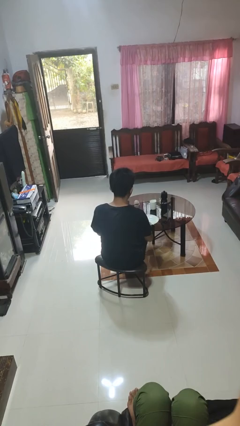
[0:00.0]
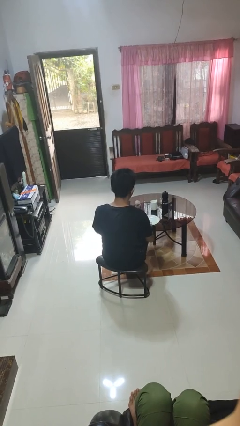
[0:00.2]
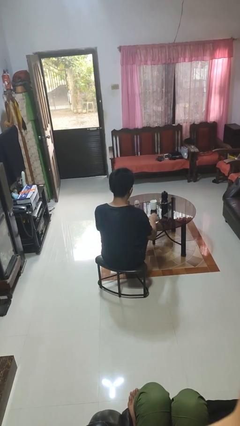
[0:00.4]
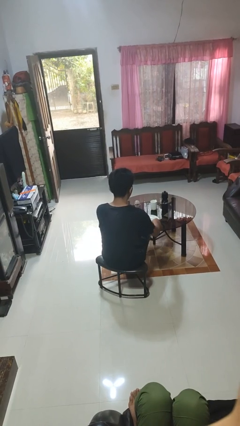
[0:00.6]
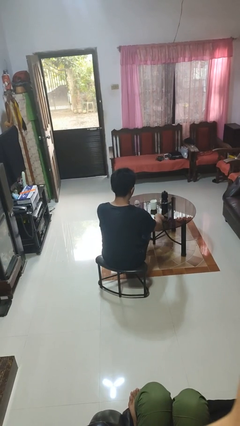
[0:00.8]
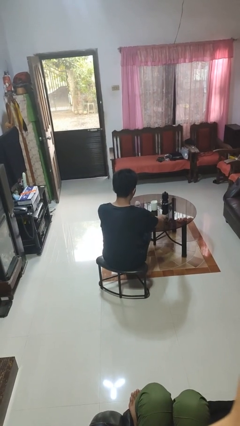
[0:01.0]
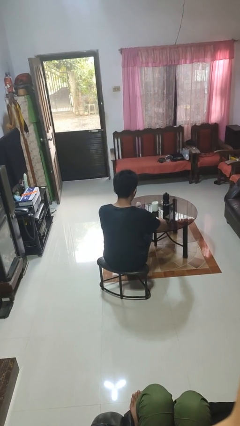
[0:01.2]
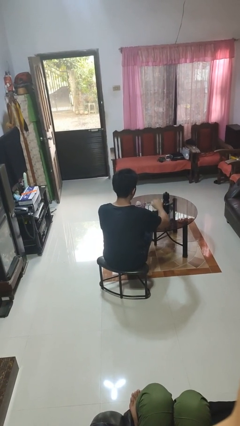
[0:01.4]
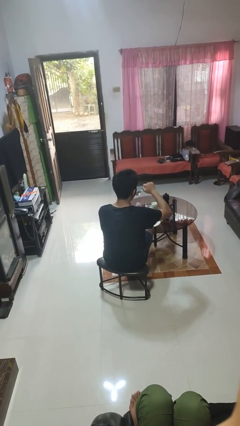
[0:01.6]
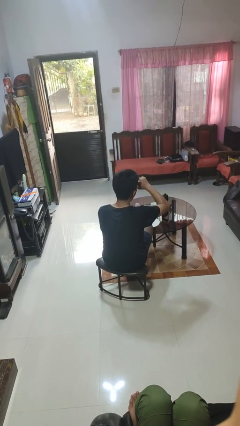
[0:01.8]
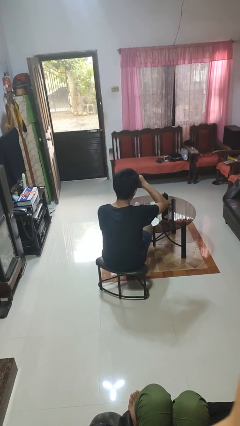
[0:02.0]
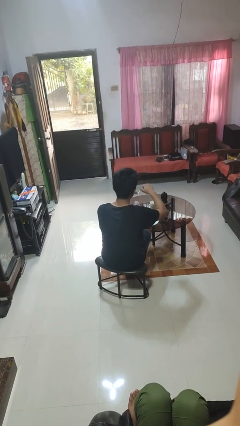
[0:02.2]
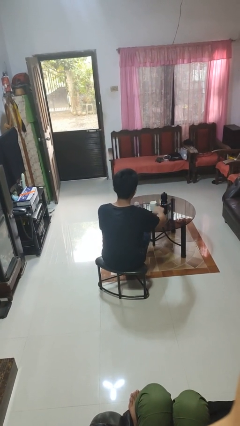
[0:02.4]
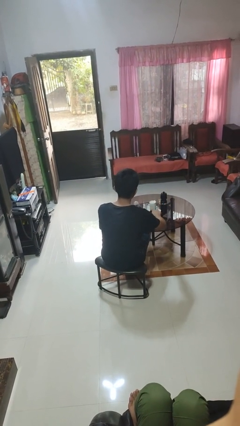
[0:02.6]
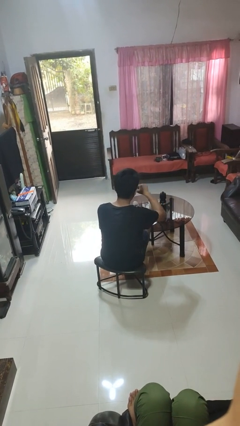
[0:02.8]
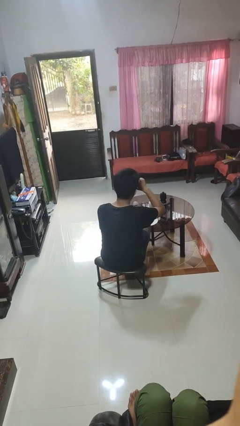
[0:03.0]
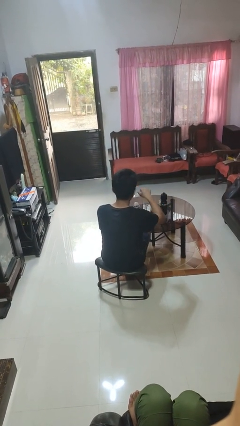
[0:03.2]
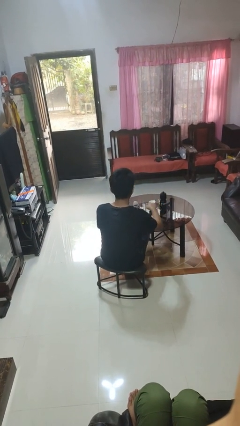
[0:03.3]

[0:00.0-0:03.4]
person eats with utensil

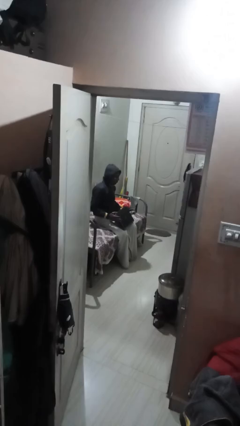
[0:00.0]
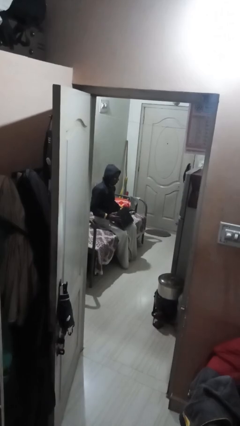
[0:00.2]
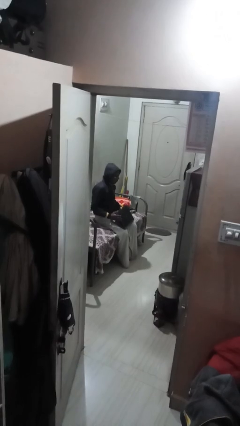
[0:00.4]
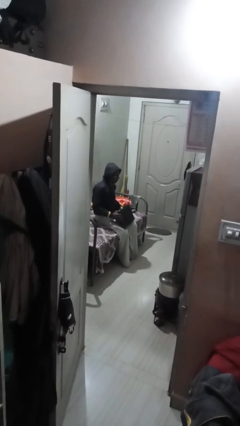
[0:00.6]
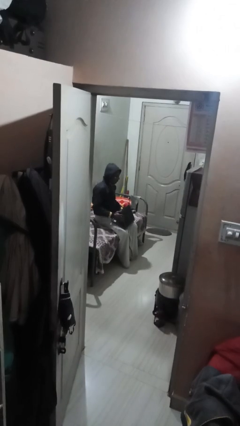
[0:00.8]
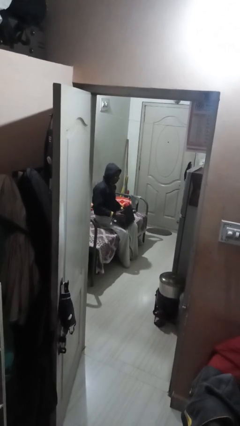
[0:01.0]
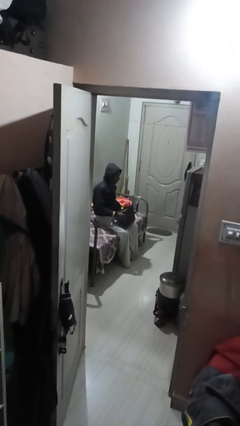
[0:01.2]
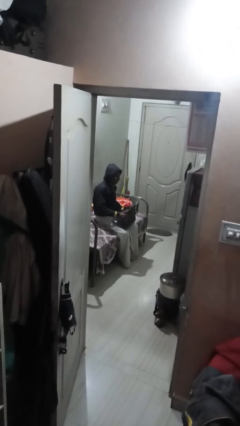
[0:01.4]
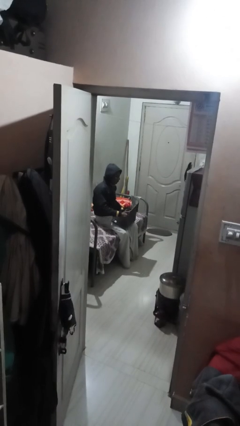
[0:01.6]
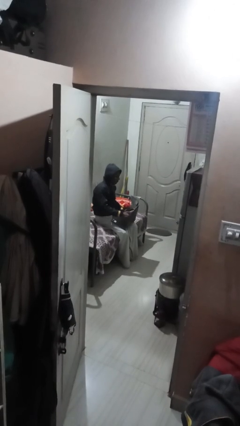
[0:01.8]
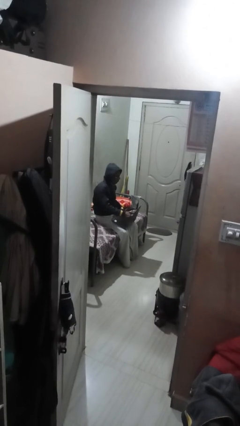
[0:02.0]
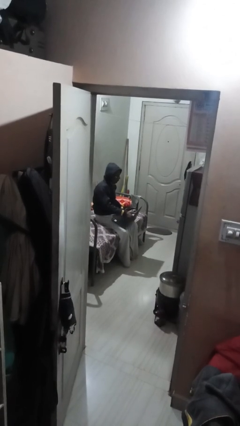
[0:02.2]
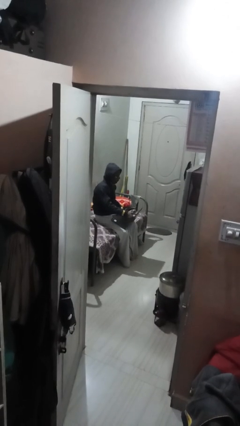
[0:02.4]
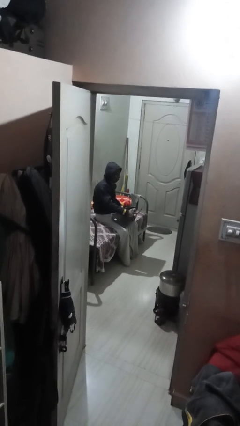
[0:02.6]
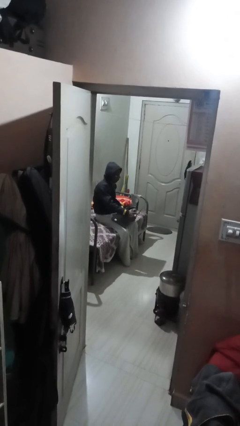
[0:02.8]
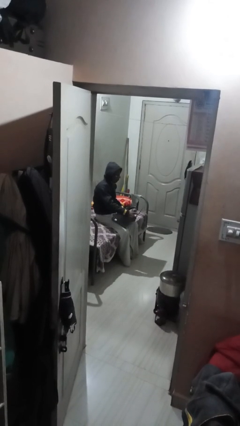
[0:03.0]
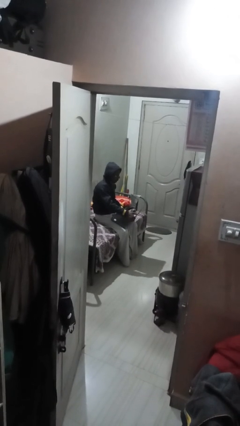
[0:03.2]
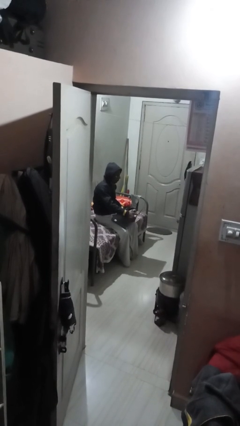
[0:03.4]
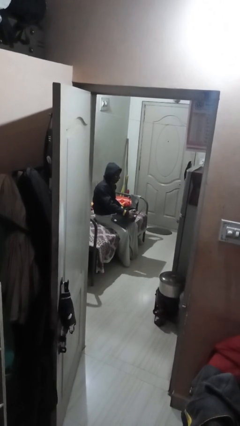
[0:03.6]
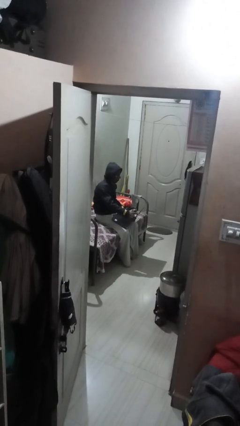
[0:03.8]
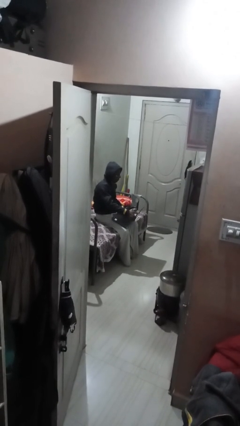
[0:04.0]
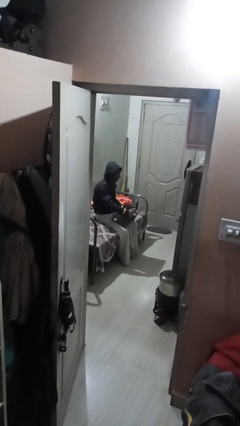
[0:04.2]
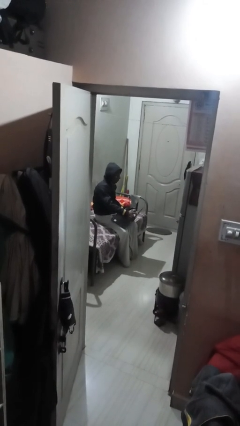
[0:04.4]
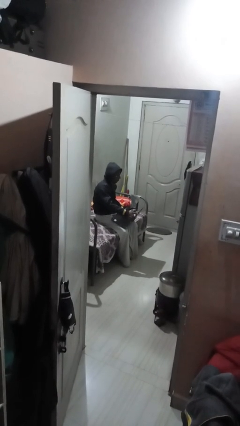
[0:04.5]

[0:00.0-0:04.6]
person interacts with laptop

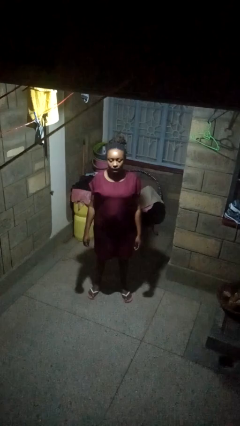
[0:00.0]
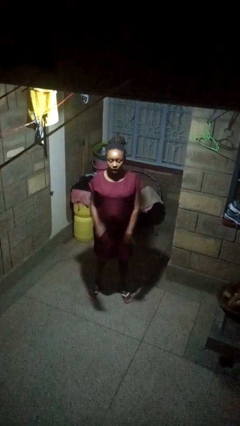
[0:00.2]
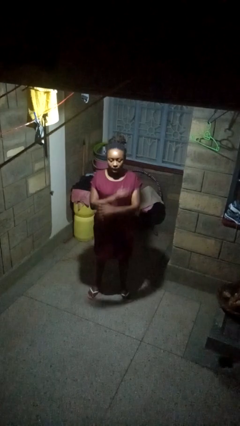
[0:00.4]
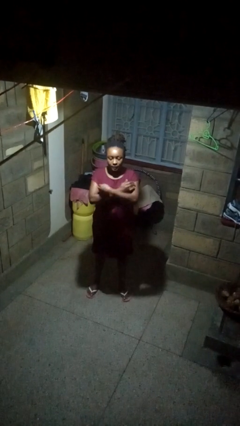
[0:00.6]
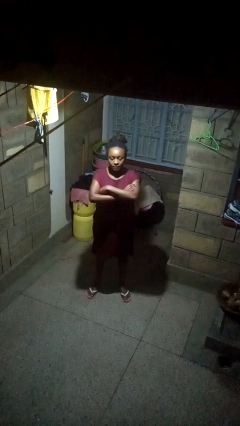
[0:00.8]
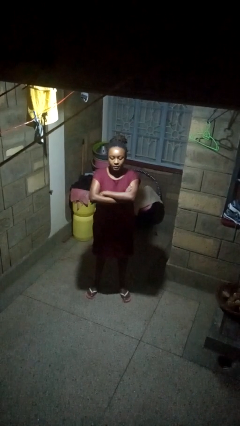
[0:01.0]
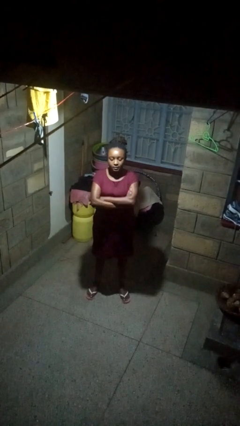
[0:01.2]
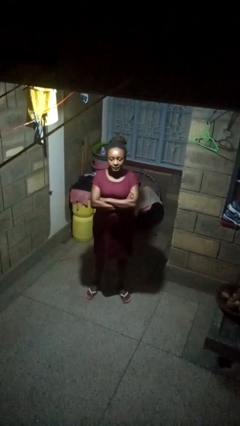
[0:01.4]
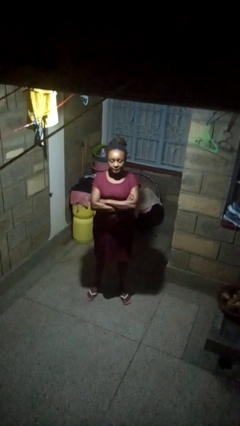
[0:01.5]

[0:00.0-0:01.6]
person crosses arms

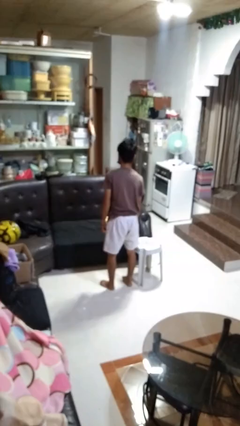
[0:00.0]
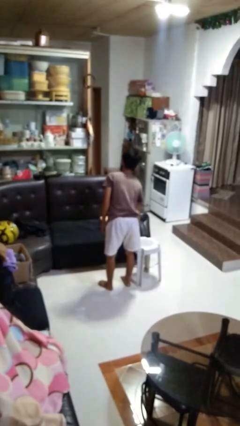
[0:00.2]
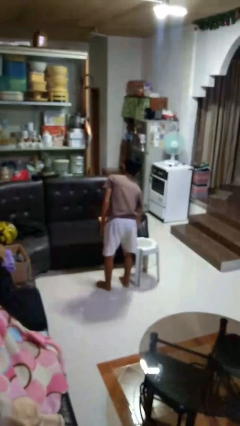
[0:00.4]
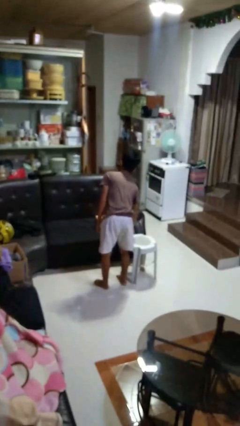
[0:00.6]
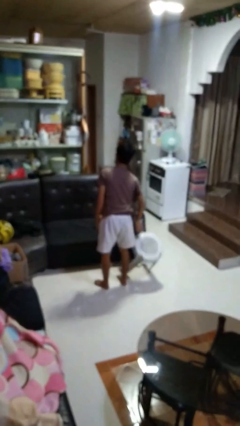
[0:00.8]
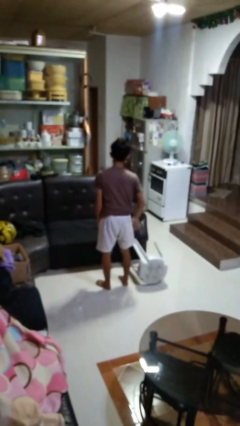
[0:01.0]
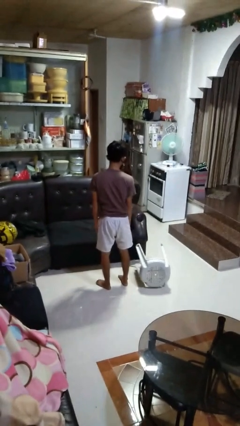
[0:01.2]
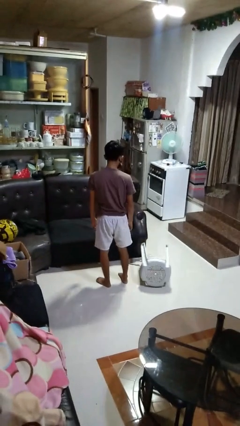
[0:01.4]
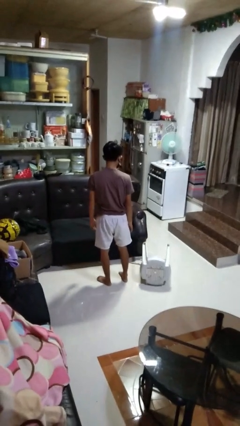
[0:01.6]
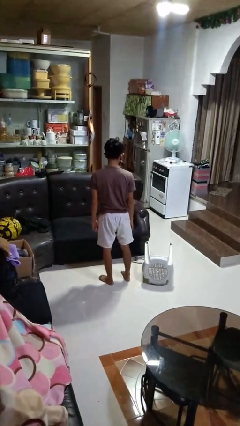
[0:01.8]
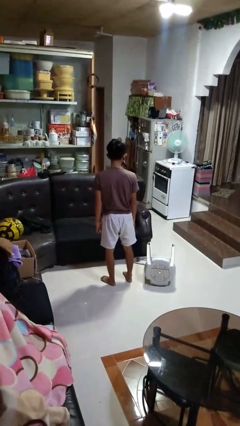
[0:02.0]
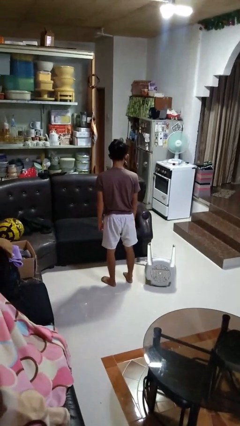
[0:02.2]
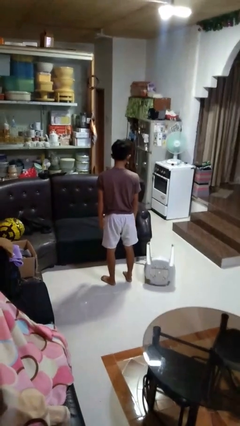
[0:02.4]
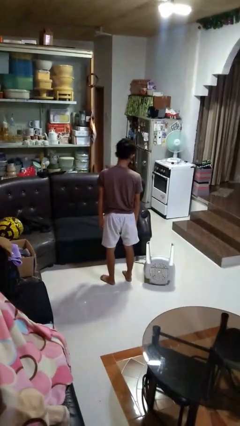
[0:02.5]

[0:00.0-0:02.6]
person knocks over furniture

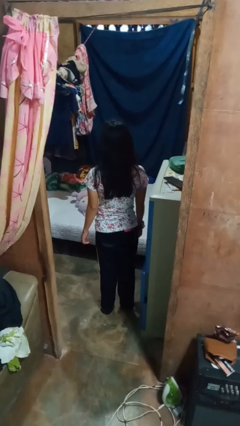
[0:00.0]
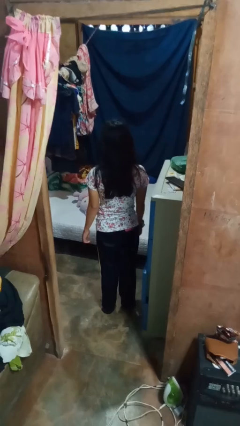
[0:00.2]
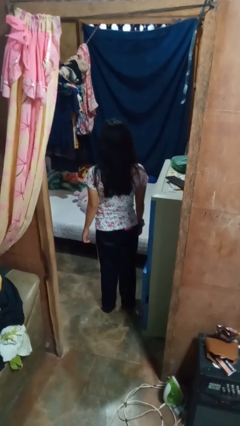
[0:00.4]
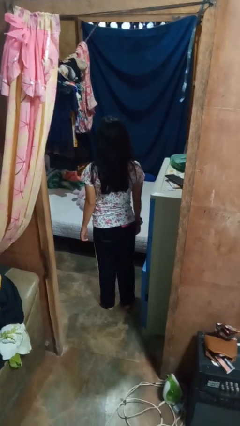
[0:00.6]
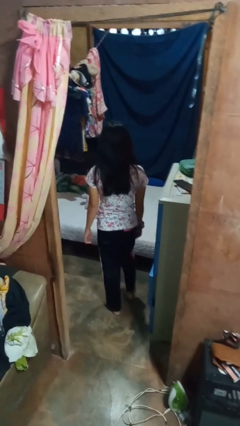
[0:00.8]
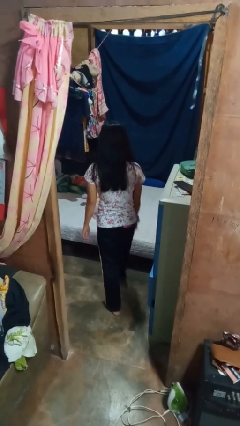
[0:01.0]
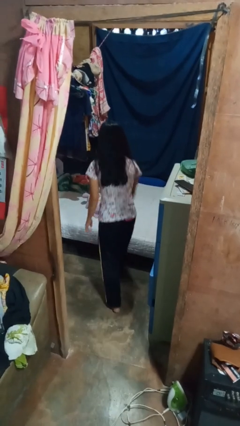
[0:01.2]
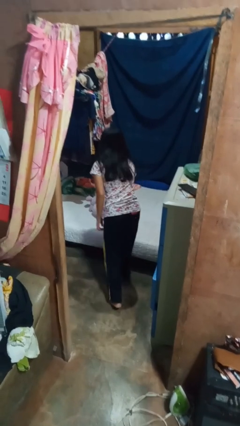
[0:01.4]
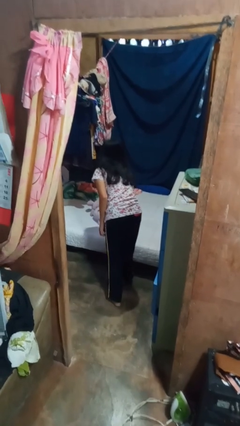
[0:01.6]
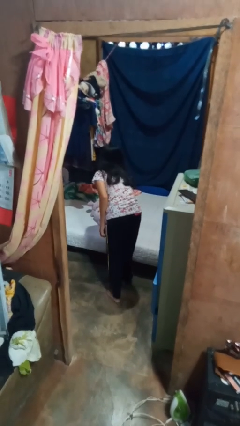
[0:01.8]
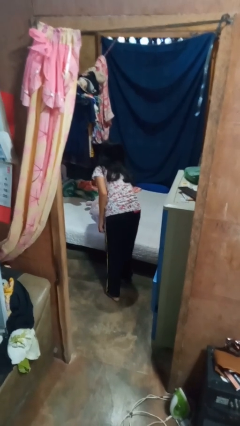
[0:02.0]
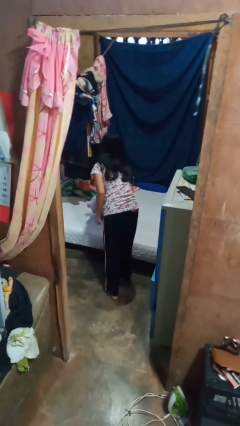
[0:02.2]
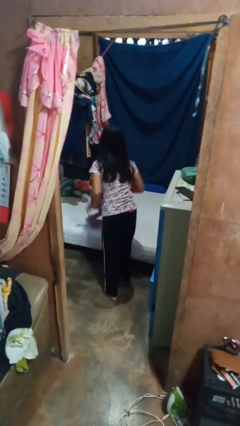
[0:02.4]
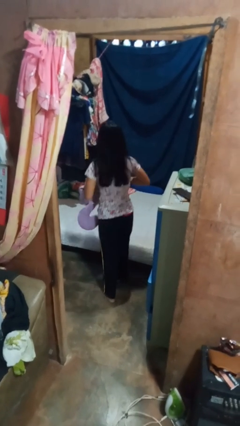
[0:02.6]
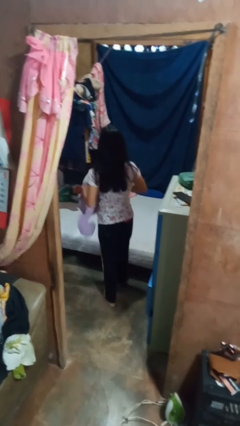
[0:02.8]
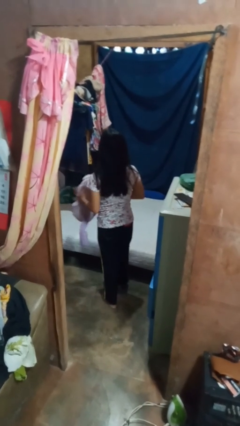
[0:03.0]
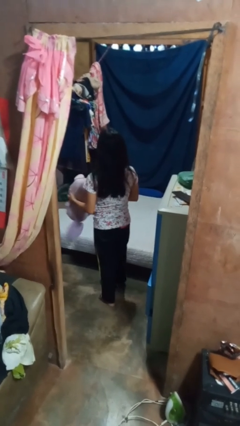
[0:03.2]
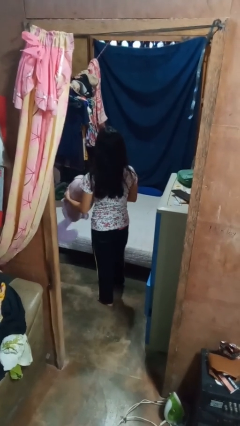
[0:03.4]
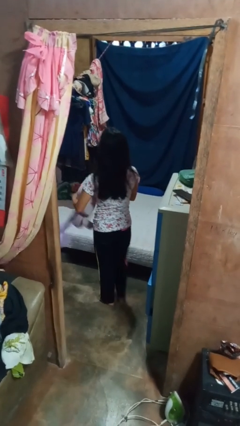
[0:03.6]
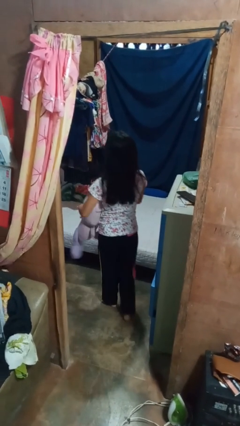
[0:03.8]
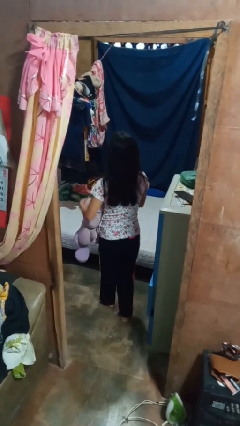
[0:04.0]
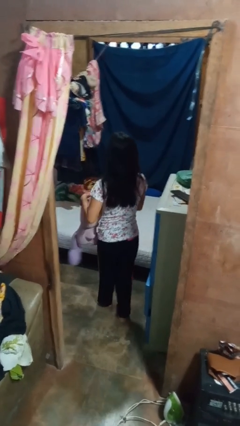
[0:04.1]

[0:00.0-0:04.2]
person picks up object from bed

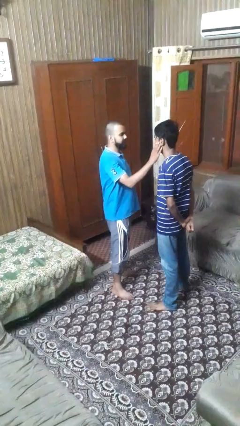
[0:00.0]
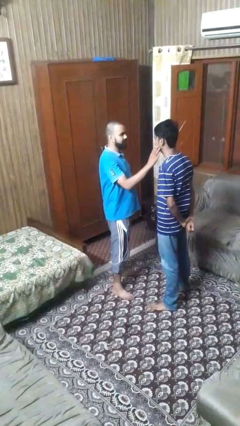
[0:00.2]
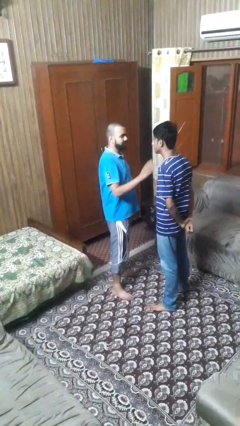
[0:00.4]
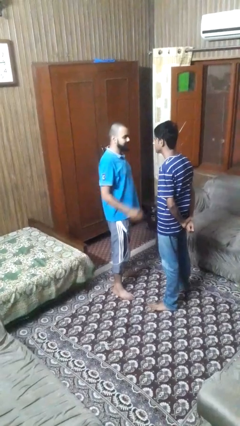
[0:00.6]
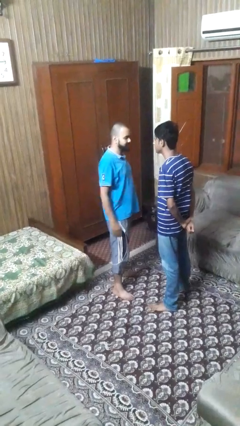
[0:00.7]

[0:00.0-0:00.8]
person touches face of person

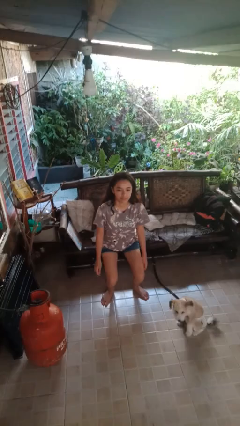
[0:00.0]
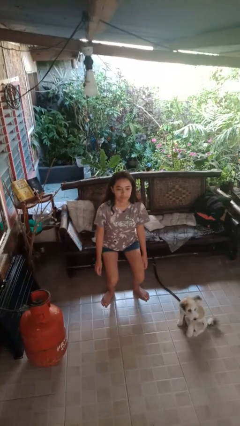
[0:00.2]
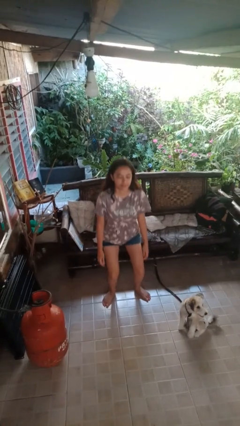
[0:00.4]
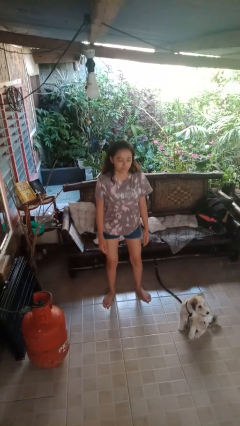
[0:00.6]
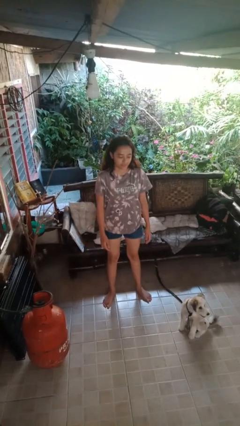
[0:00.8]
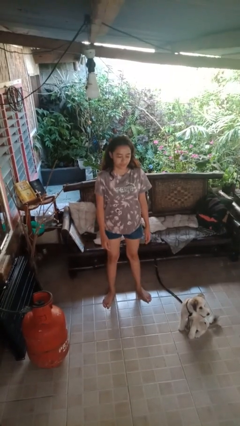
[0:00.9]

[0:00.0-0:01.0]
person stands up
